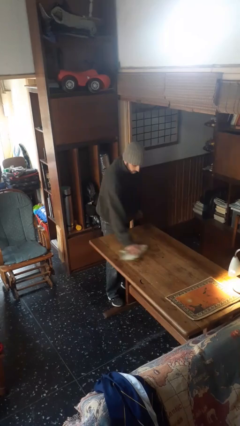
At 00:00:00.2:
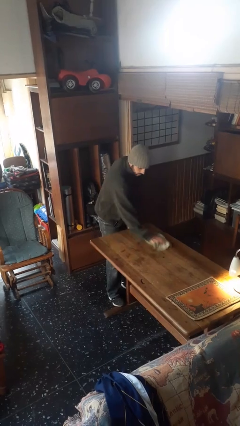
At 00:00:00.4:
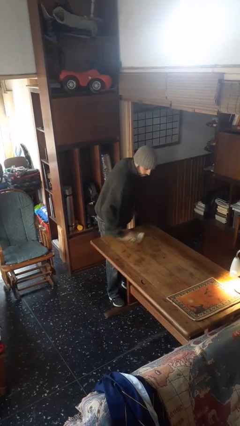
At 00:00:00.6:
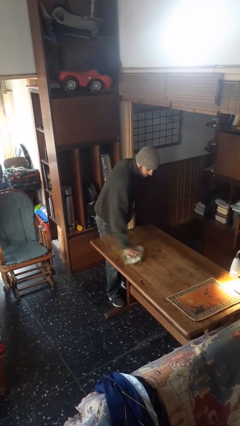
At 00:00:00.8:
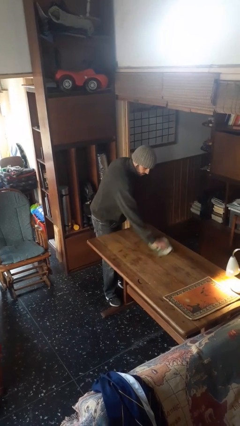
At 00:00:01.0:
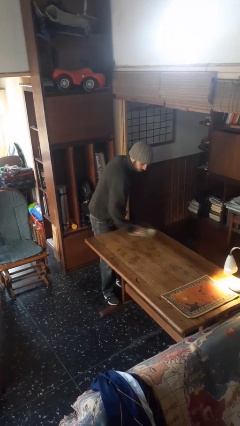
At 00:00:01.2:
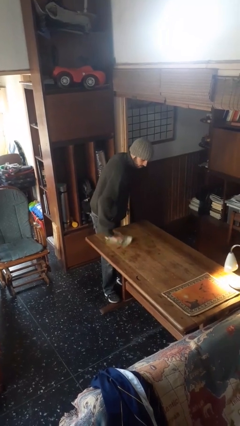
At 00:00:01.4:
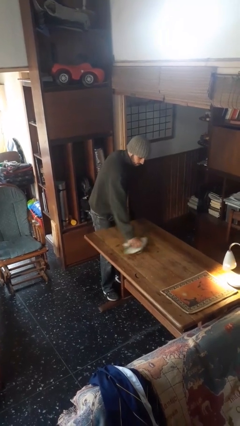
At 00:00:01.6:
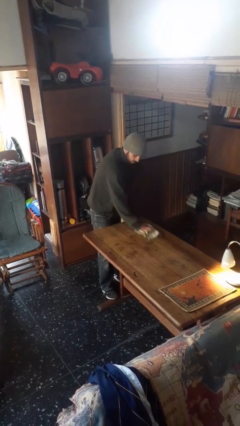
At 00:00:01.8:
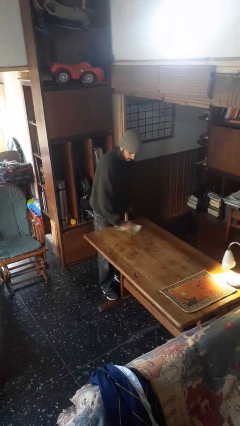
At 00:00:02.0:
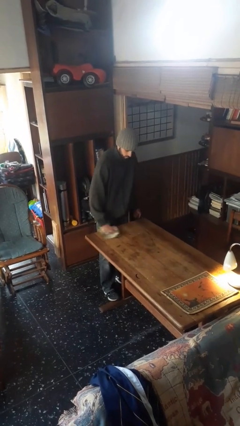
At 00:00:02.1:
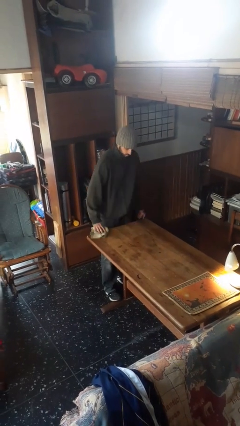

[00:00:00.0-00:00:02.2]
person cleans table with rag

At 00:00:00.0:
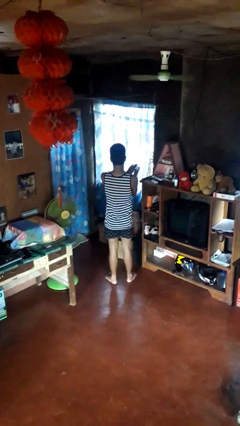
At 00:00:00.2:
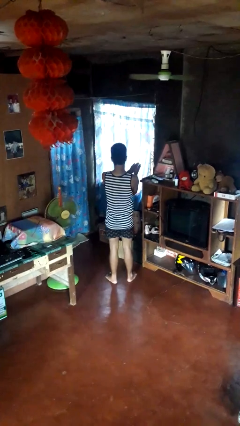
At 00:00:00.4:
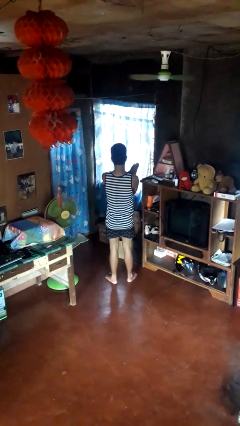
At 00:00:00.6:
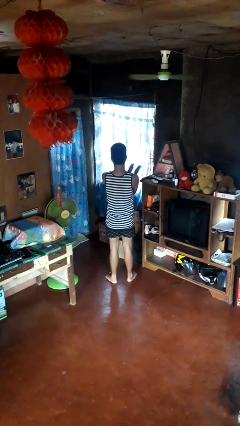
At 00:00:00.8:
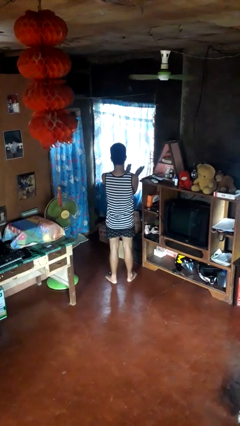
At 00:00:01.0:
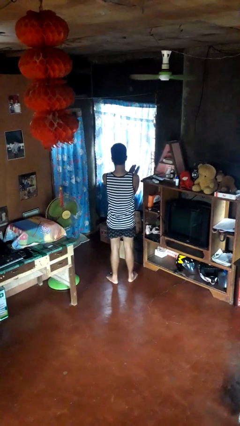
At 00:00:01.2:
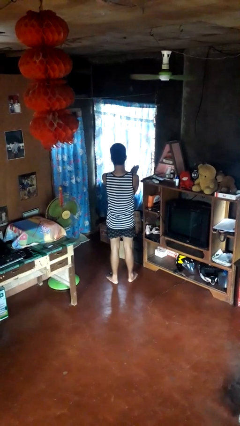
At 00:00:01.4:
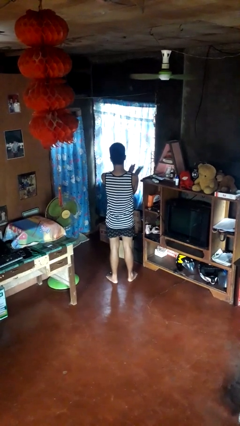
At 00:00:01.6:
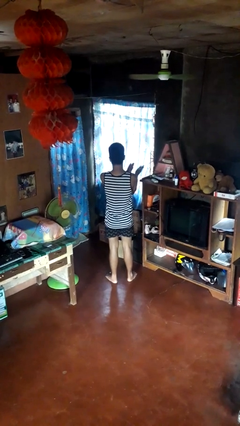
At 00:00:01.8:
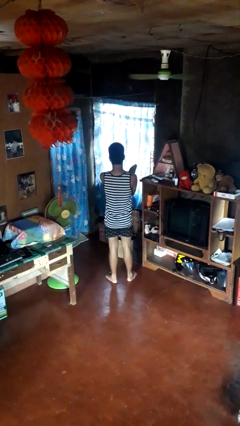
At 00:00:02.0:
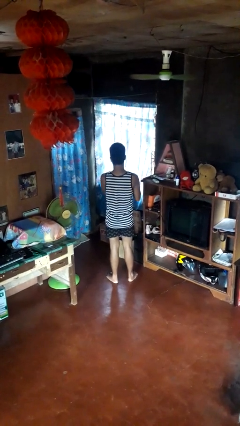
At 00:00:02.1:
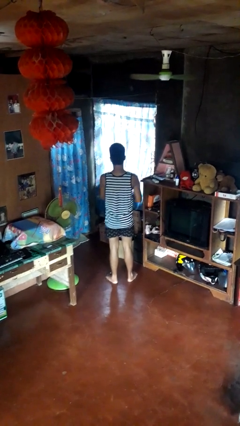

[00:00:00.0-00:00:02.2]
person claps hands

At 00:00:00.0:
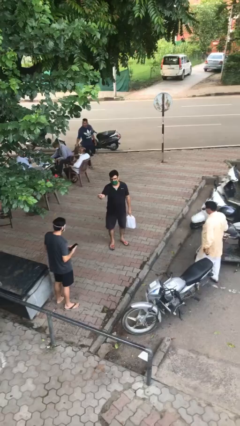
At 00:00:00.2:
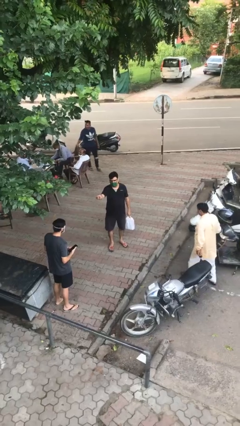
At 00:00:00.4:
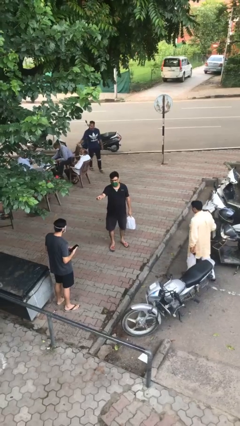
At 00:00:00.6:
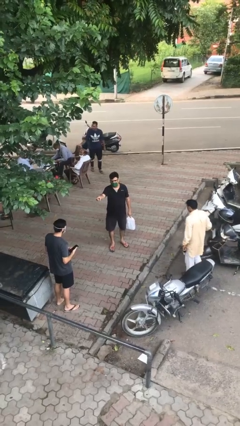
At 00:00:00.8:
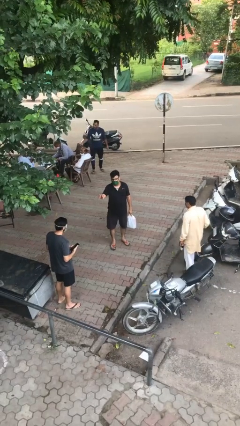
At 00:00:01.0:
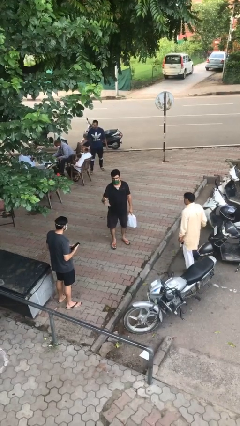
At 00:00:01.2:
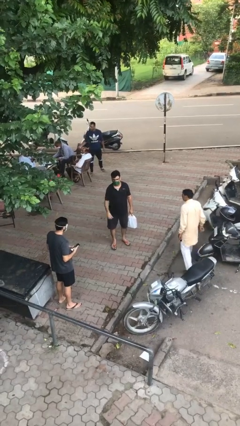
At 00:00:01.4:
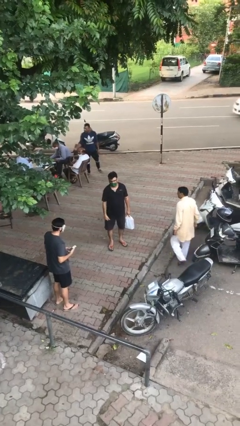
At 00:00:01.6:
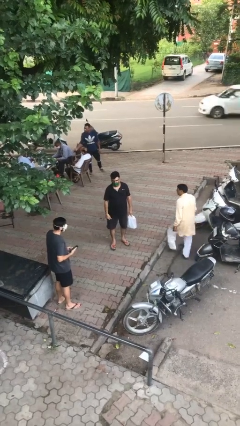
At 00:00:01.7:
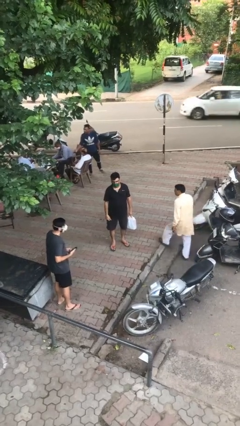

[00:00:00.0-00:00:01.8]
person points at person

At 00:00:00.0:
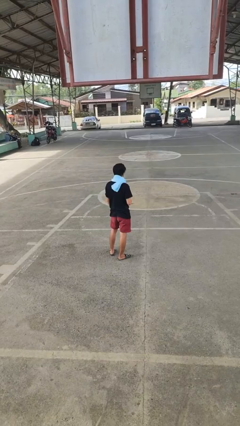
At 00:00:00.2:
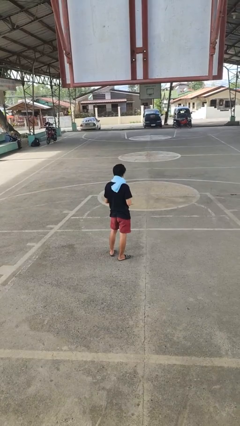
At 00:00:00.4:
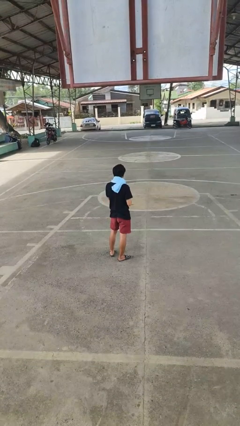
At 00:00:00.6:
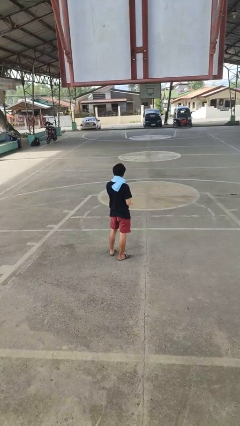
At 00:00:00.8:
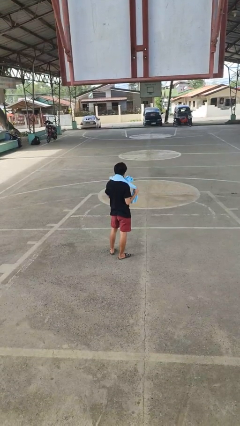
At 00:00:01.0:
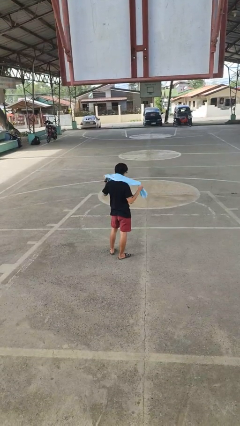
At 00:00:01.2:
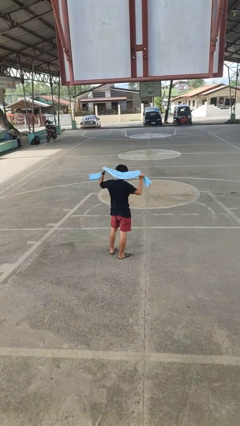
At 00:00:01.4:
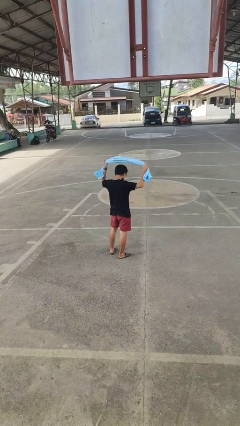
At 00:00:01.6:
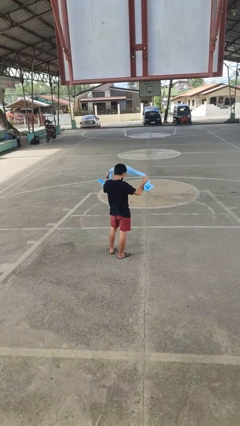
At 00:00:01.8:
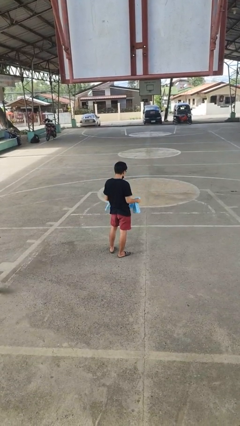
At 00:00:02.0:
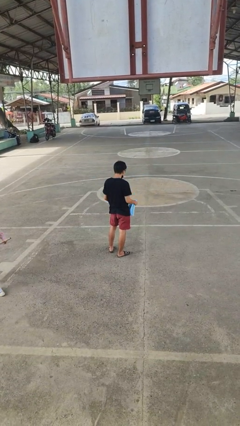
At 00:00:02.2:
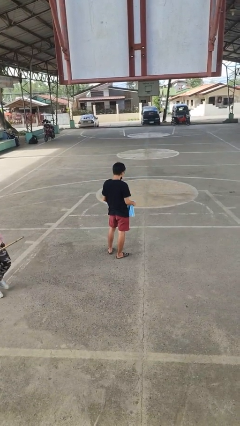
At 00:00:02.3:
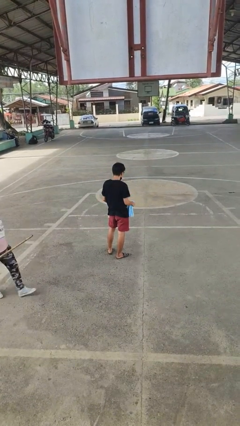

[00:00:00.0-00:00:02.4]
person takes off scarf

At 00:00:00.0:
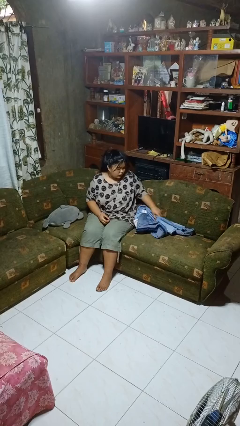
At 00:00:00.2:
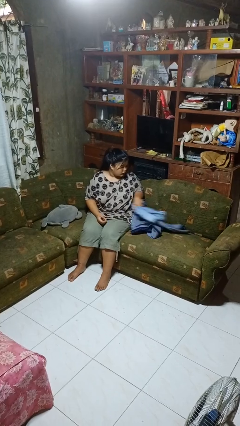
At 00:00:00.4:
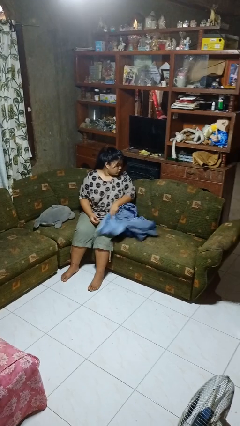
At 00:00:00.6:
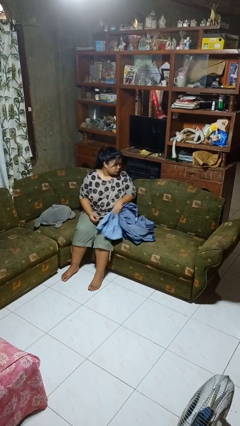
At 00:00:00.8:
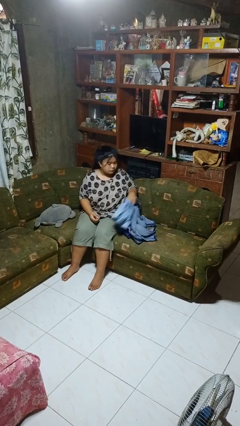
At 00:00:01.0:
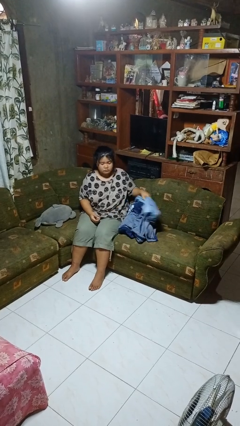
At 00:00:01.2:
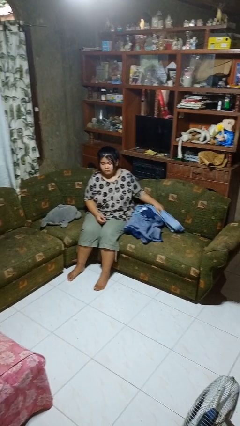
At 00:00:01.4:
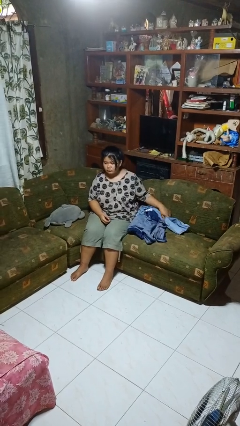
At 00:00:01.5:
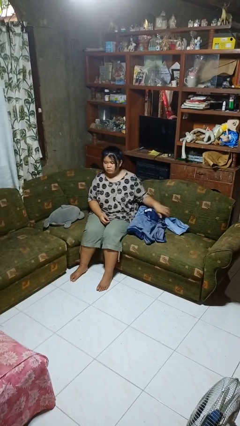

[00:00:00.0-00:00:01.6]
person searches in couch

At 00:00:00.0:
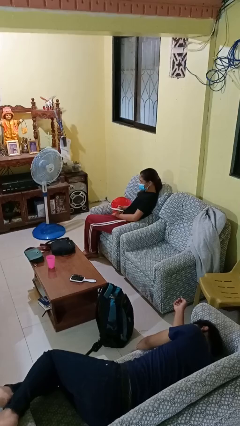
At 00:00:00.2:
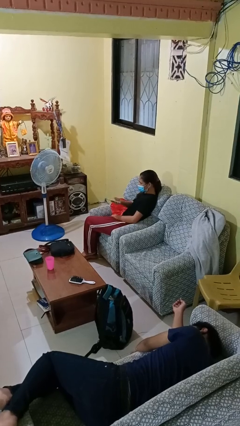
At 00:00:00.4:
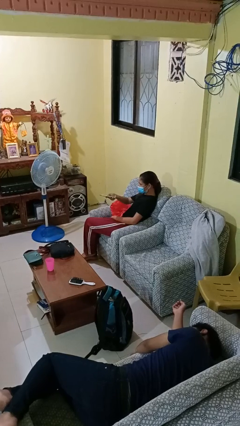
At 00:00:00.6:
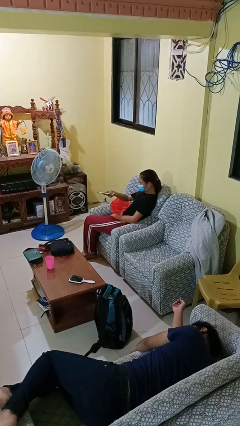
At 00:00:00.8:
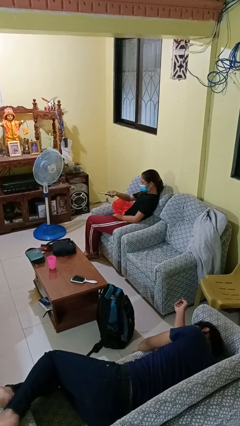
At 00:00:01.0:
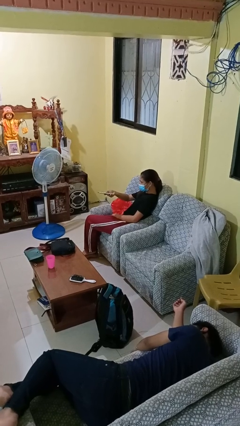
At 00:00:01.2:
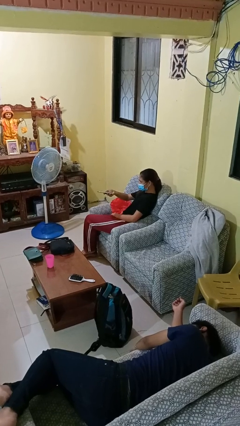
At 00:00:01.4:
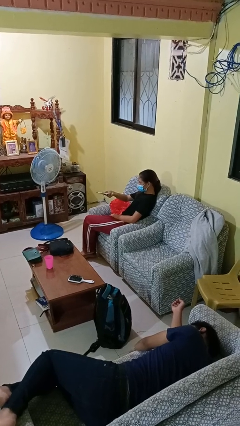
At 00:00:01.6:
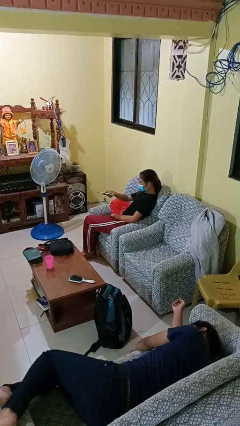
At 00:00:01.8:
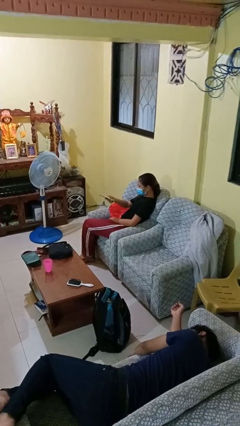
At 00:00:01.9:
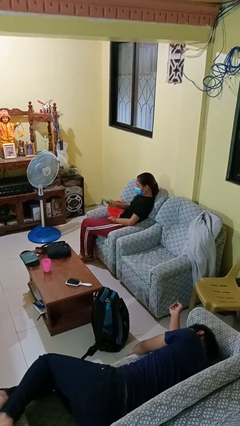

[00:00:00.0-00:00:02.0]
person uses television remote

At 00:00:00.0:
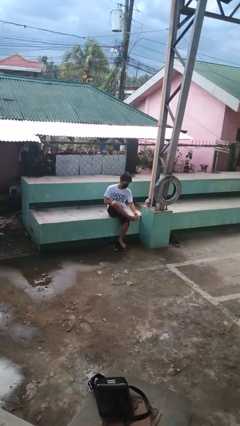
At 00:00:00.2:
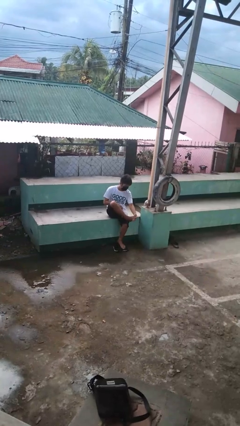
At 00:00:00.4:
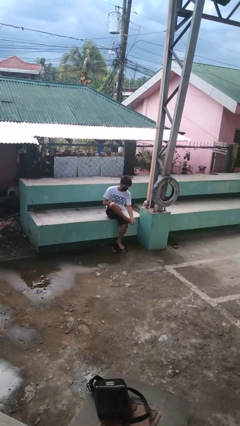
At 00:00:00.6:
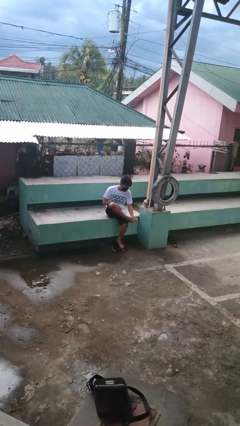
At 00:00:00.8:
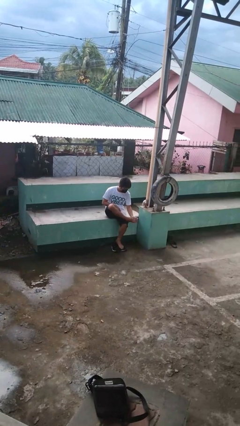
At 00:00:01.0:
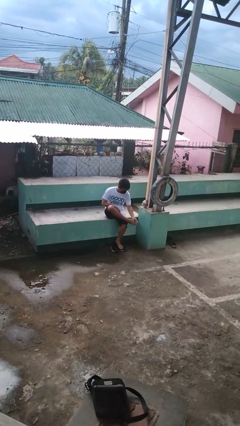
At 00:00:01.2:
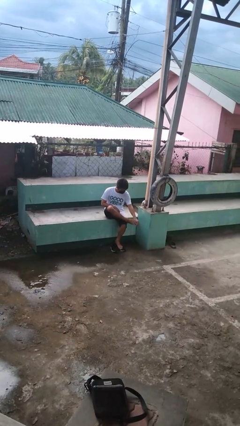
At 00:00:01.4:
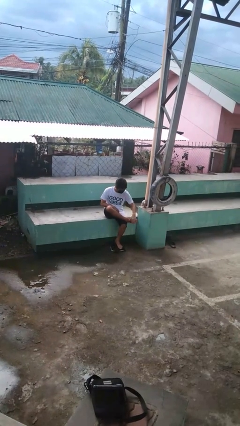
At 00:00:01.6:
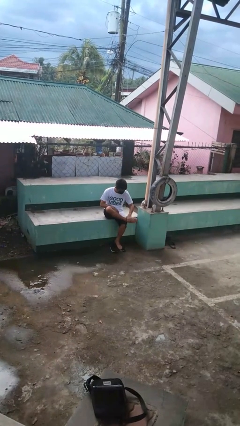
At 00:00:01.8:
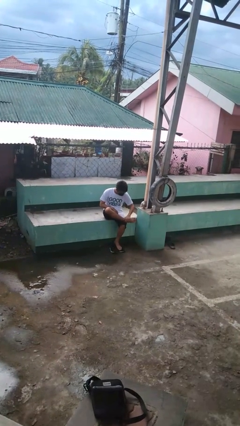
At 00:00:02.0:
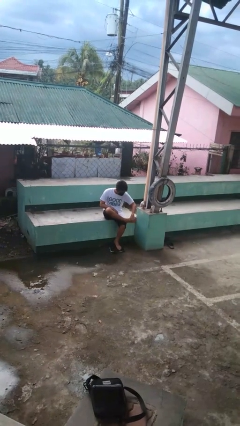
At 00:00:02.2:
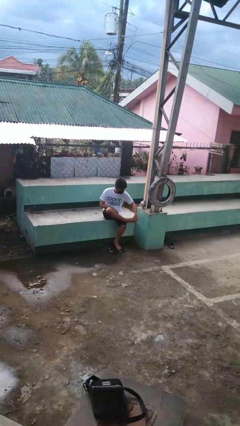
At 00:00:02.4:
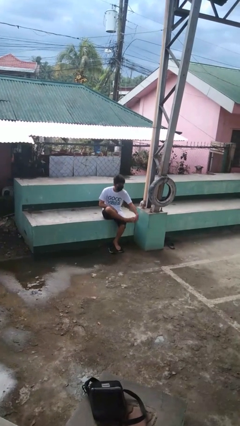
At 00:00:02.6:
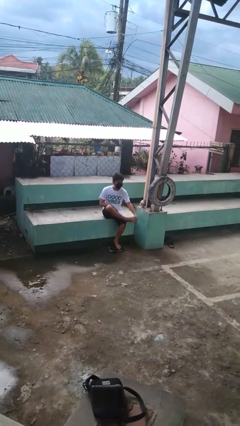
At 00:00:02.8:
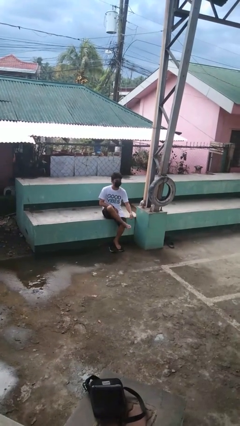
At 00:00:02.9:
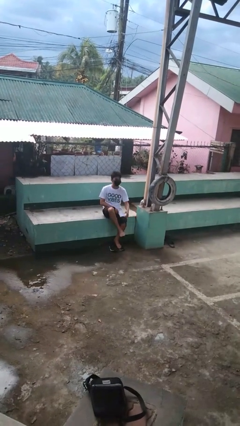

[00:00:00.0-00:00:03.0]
person rubs foot

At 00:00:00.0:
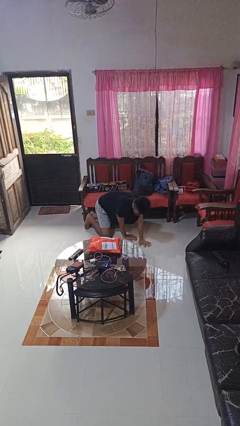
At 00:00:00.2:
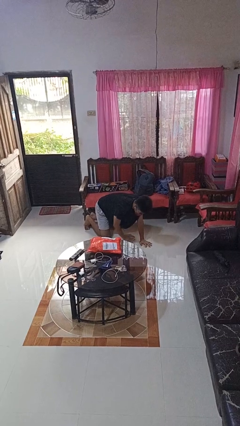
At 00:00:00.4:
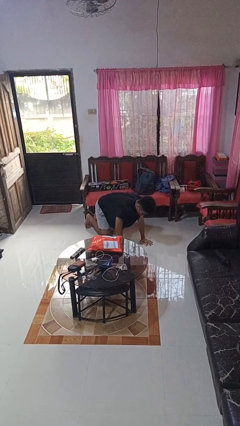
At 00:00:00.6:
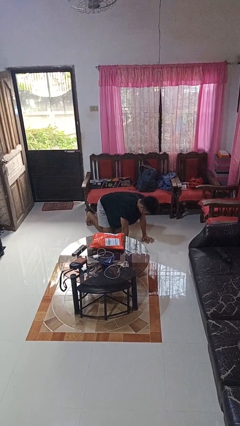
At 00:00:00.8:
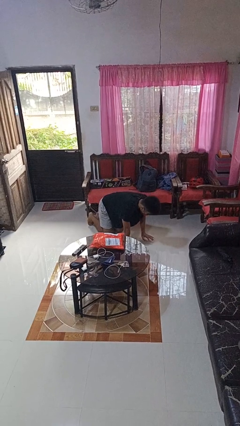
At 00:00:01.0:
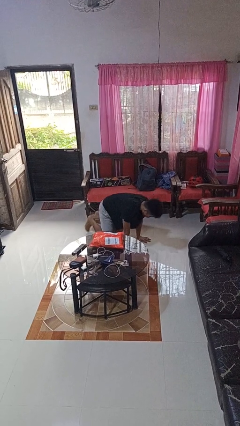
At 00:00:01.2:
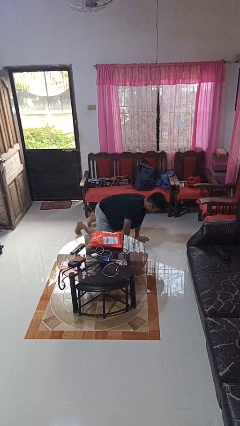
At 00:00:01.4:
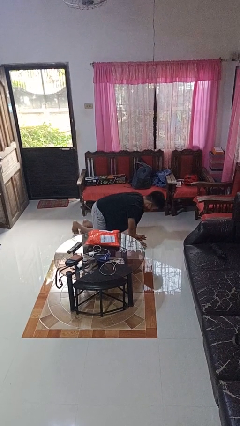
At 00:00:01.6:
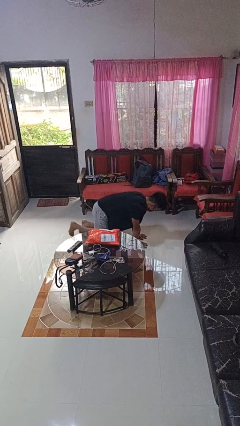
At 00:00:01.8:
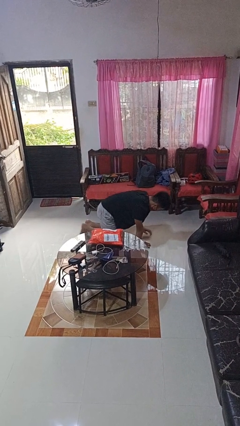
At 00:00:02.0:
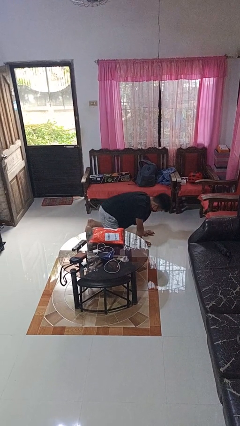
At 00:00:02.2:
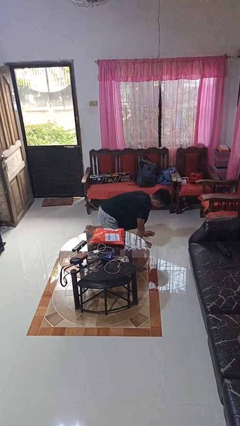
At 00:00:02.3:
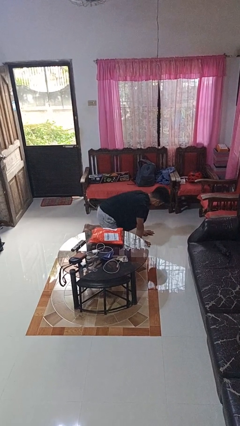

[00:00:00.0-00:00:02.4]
person crawls
